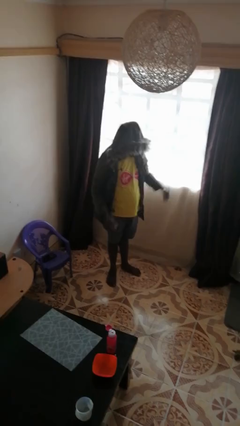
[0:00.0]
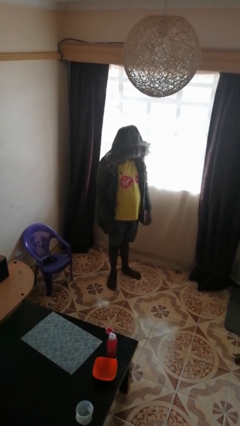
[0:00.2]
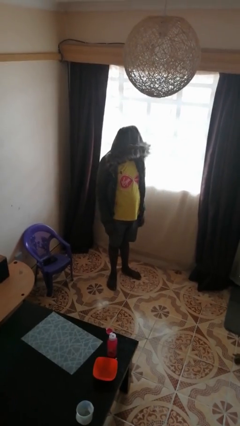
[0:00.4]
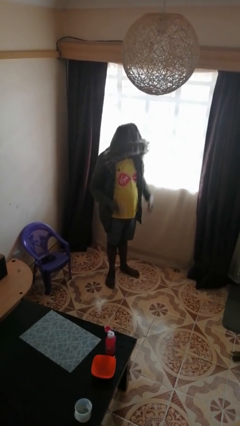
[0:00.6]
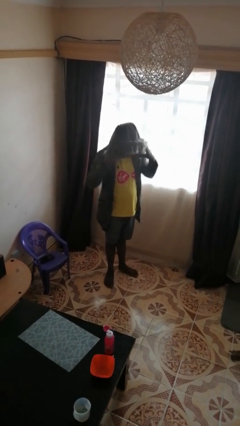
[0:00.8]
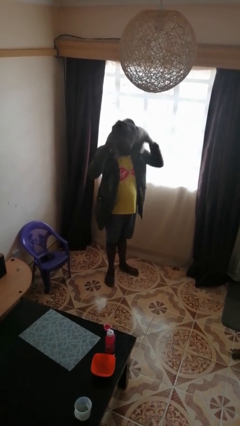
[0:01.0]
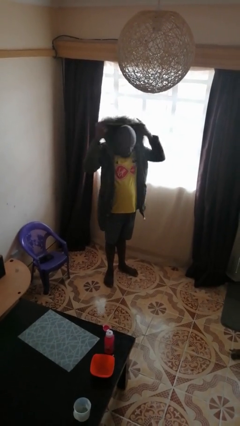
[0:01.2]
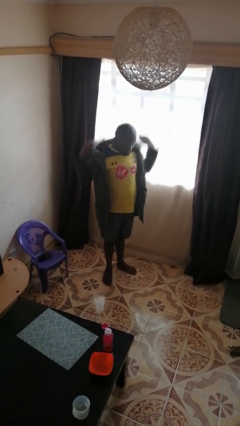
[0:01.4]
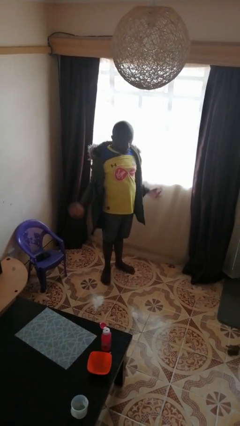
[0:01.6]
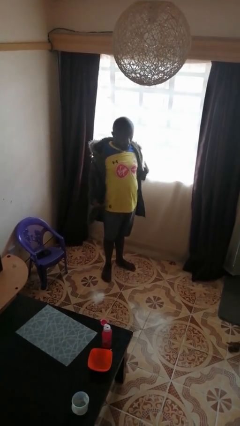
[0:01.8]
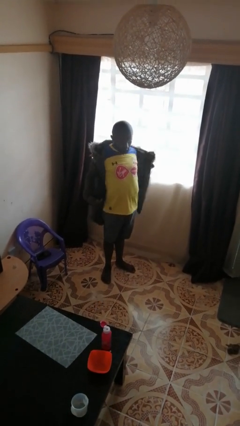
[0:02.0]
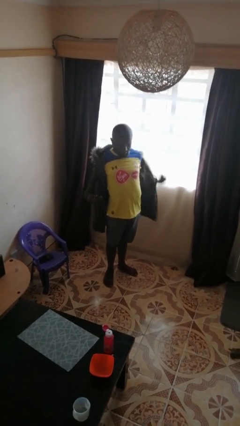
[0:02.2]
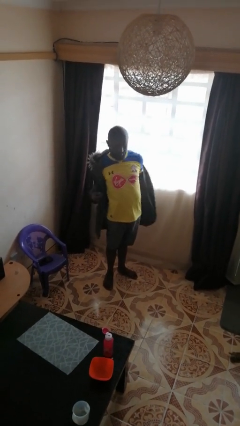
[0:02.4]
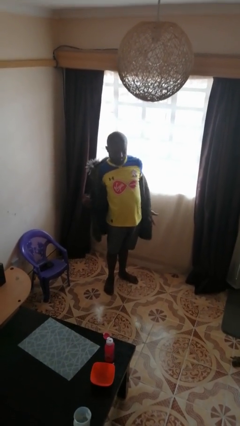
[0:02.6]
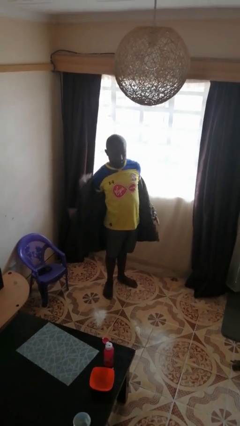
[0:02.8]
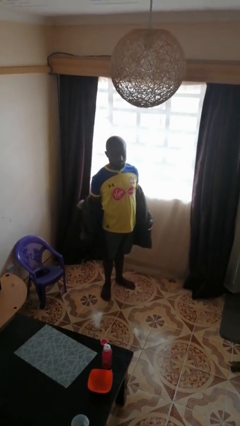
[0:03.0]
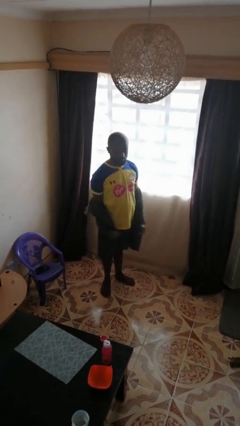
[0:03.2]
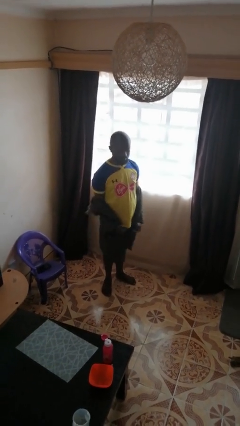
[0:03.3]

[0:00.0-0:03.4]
person takes off hoodie

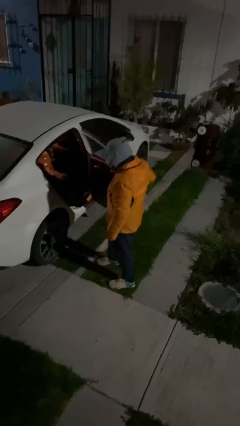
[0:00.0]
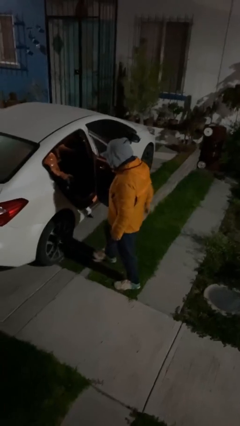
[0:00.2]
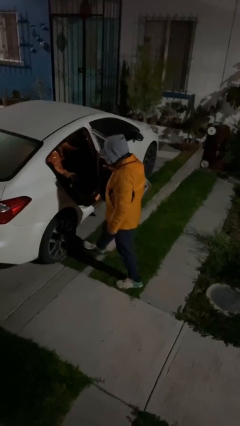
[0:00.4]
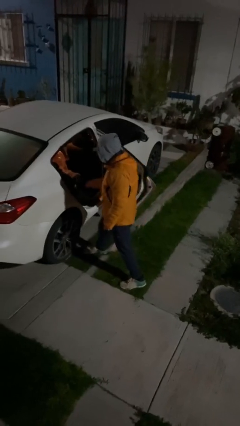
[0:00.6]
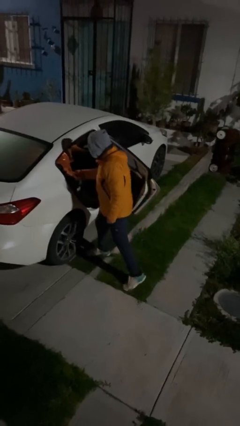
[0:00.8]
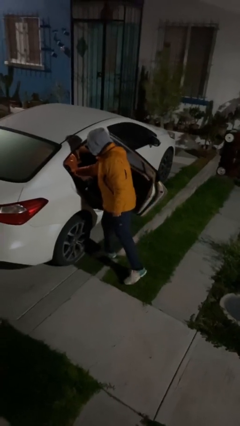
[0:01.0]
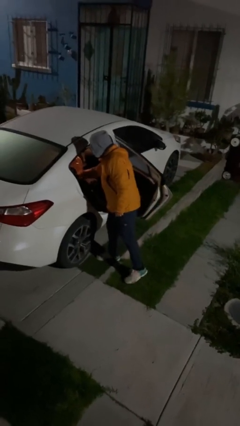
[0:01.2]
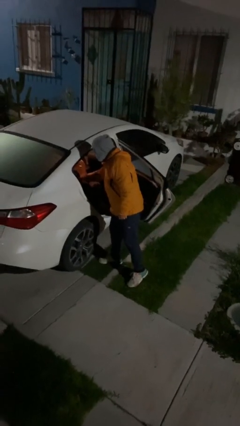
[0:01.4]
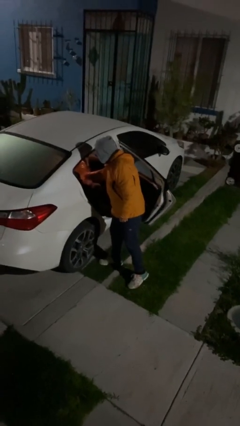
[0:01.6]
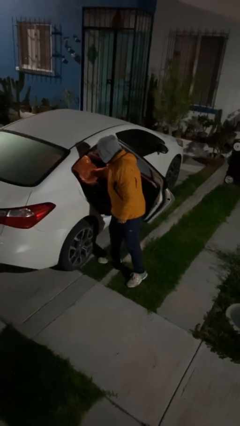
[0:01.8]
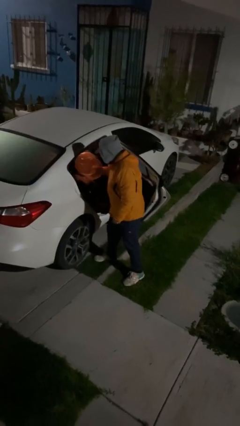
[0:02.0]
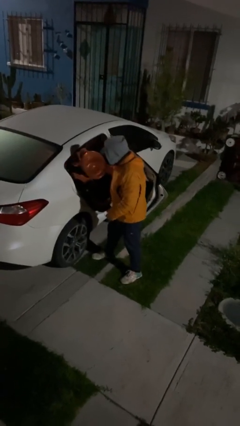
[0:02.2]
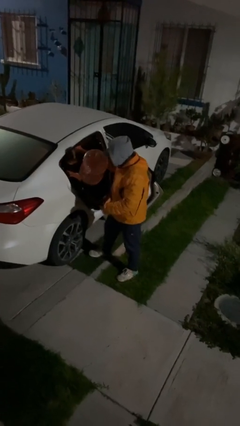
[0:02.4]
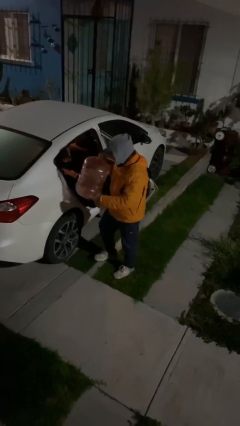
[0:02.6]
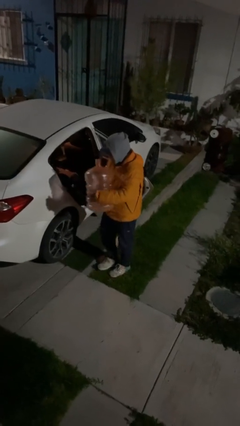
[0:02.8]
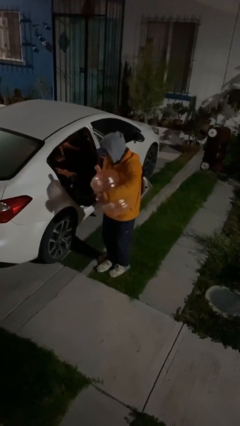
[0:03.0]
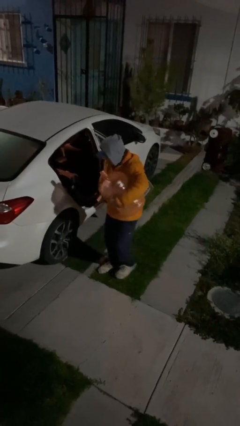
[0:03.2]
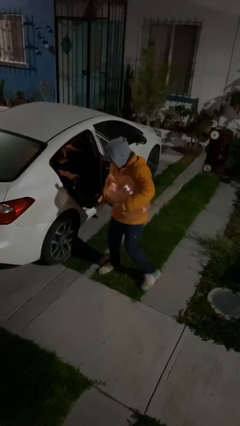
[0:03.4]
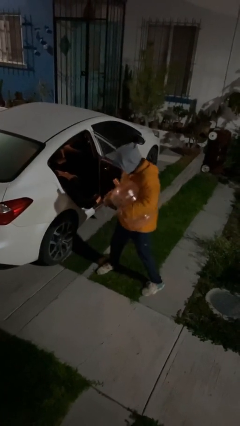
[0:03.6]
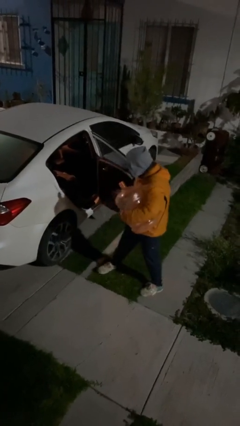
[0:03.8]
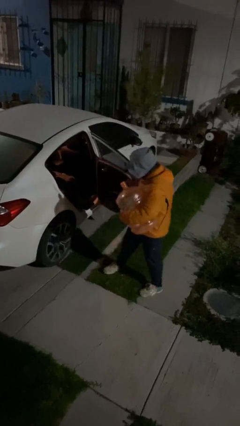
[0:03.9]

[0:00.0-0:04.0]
person unloads car

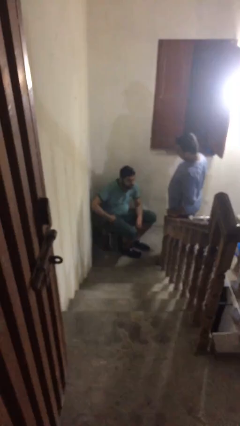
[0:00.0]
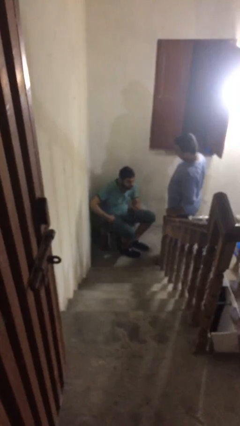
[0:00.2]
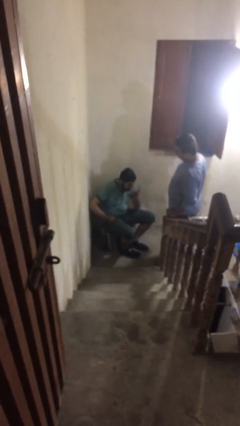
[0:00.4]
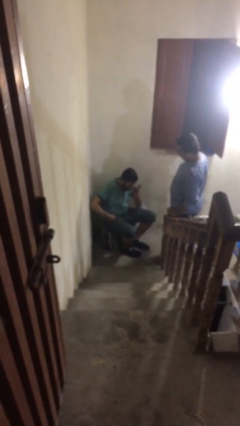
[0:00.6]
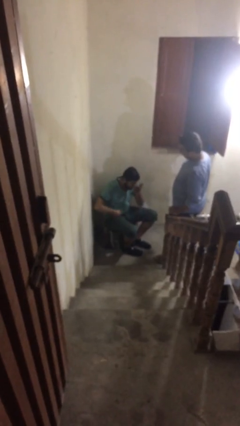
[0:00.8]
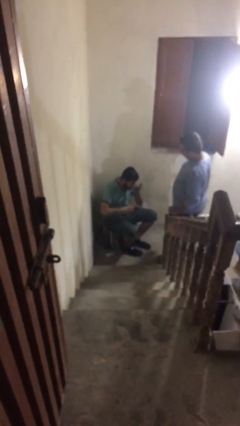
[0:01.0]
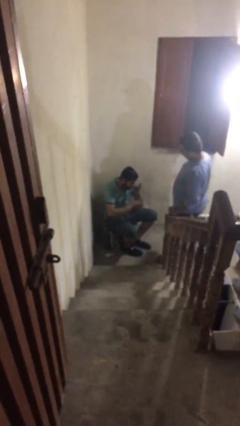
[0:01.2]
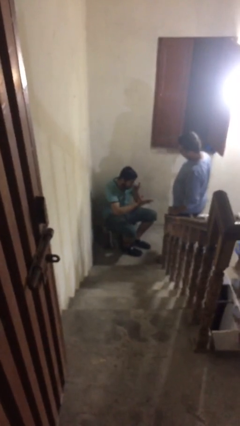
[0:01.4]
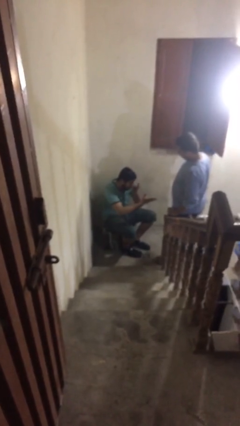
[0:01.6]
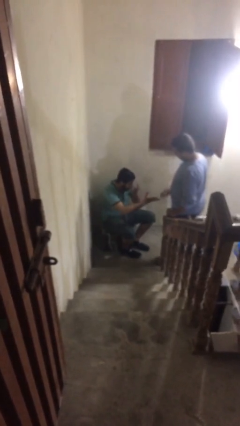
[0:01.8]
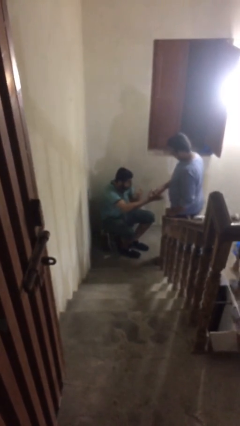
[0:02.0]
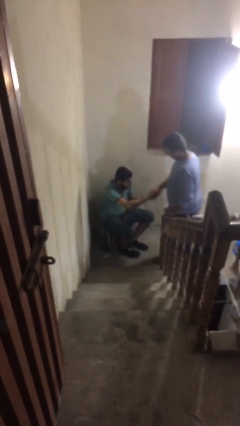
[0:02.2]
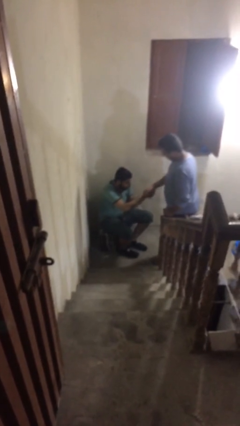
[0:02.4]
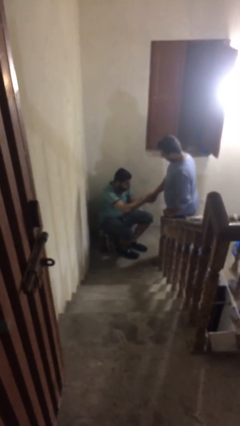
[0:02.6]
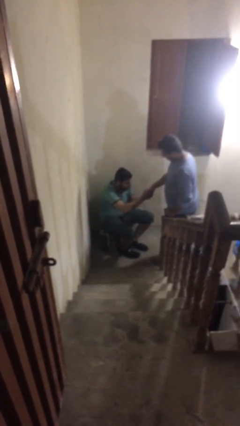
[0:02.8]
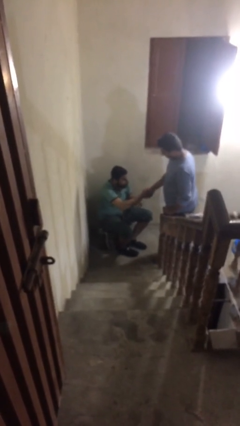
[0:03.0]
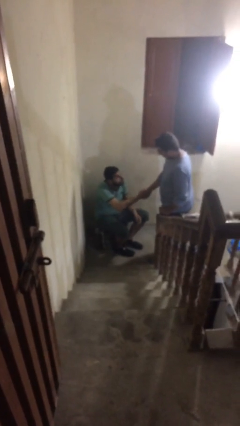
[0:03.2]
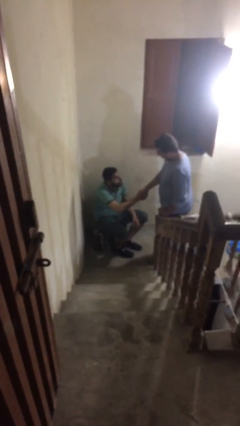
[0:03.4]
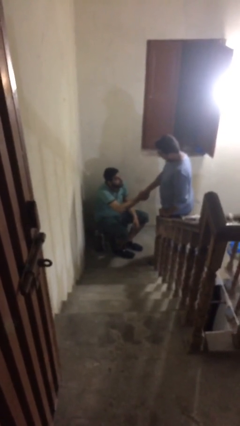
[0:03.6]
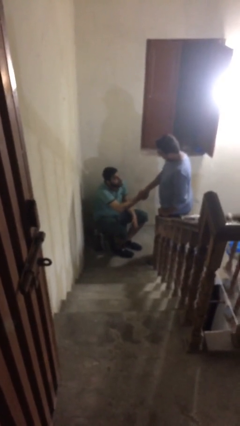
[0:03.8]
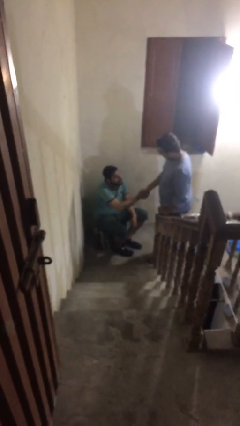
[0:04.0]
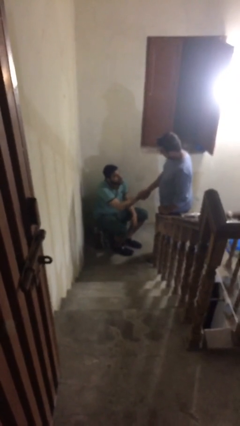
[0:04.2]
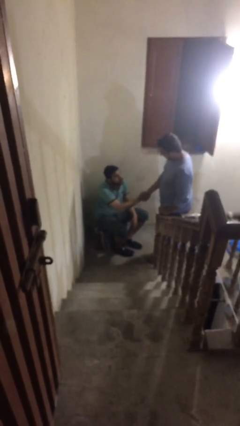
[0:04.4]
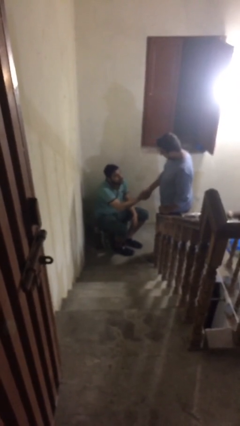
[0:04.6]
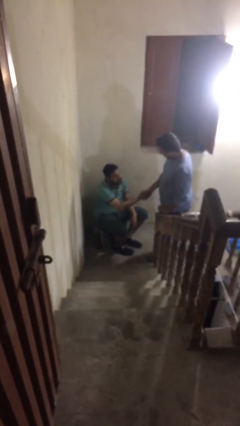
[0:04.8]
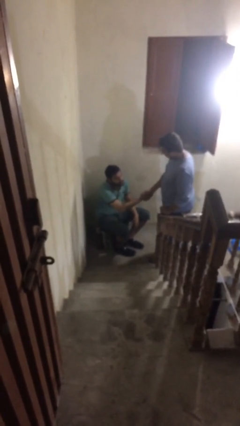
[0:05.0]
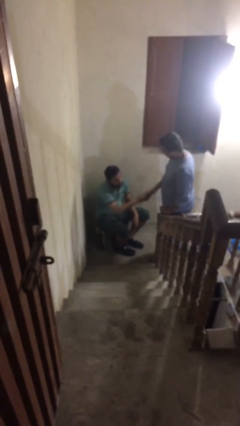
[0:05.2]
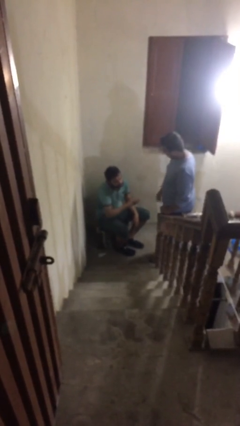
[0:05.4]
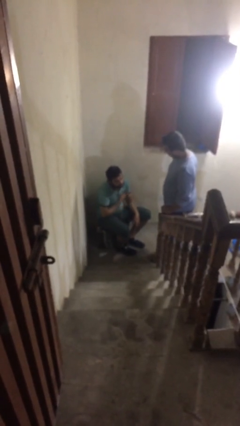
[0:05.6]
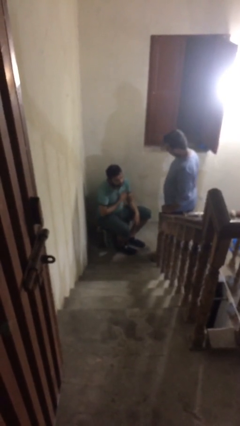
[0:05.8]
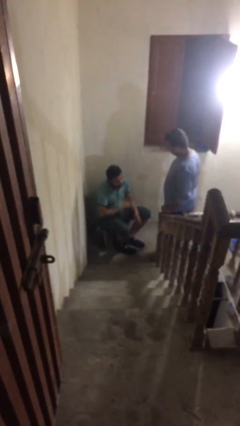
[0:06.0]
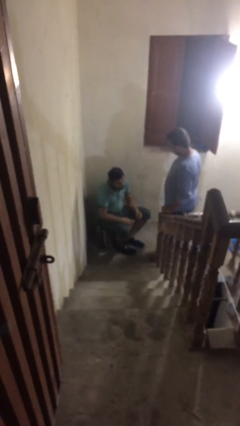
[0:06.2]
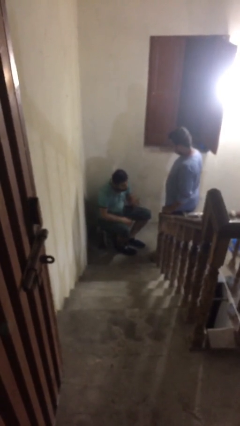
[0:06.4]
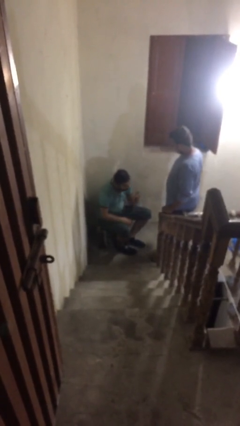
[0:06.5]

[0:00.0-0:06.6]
person shakes hand

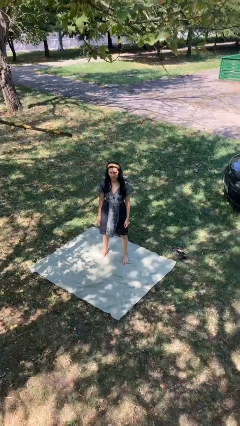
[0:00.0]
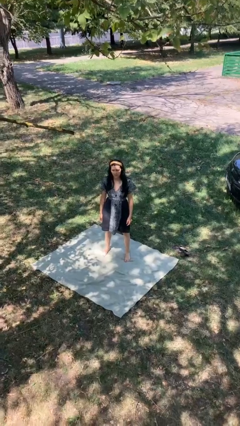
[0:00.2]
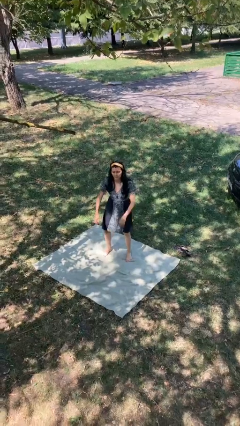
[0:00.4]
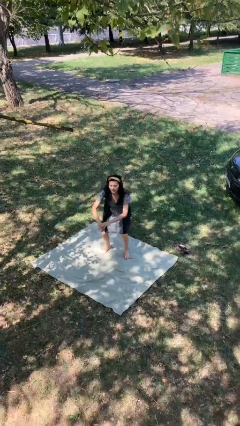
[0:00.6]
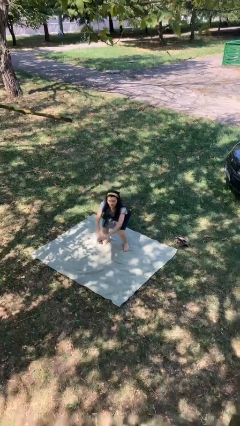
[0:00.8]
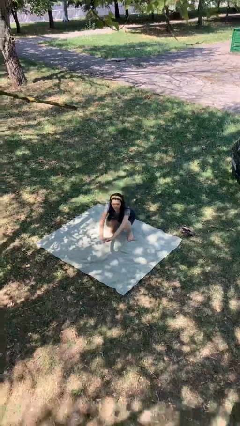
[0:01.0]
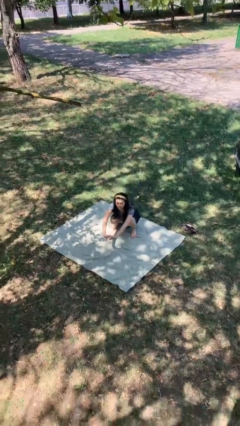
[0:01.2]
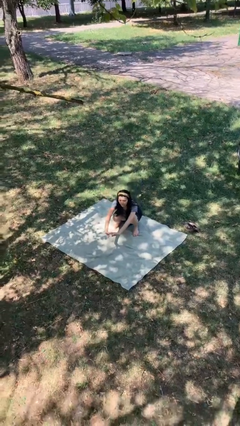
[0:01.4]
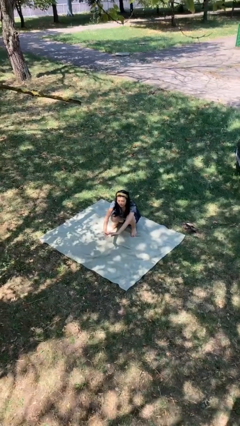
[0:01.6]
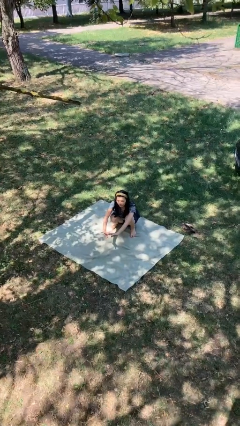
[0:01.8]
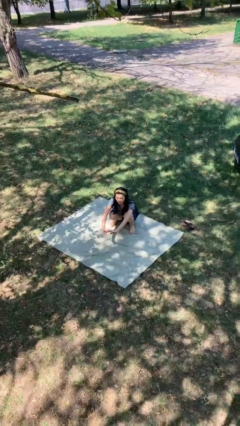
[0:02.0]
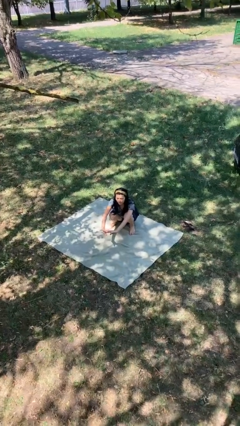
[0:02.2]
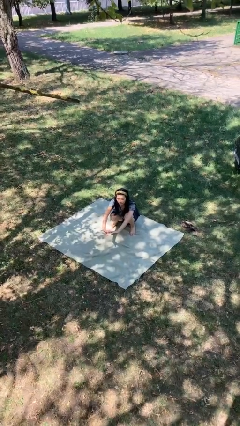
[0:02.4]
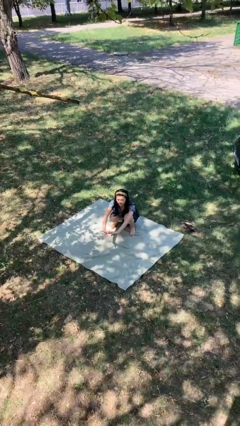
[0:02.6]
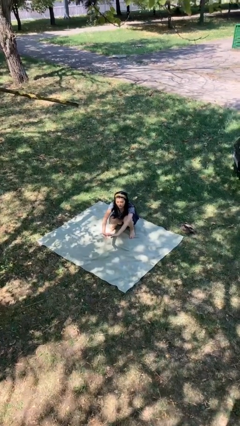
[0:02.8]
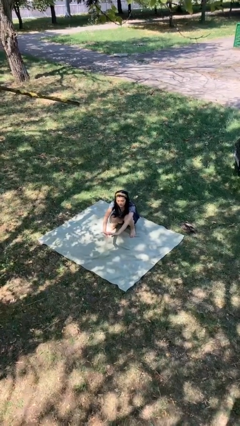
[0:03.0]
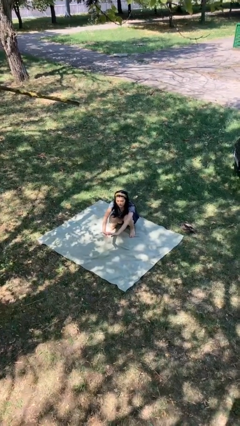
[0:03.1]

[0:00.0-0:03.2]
person squats

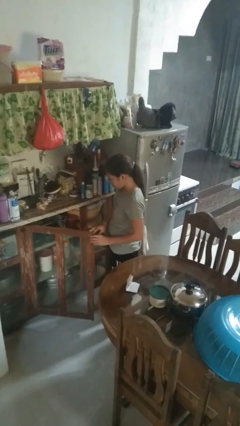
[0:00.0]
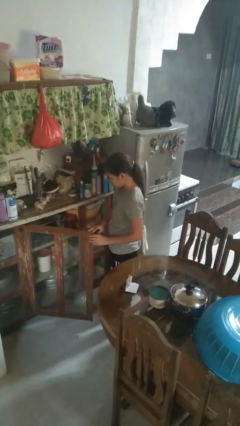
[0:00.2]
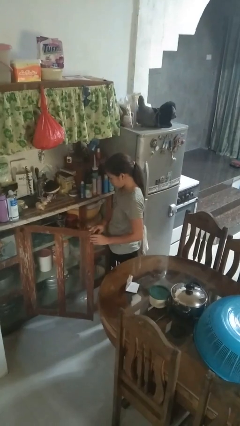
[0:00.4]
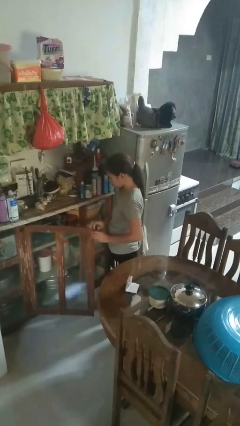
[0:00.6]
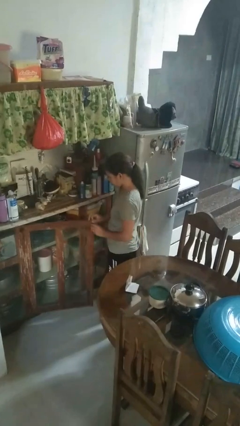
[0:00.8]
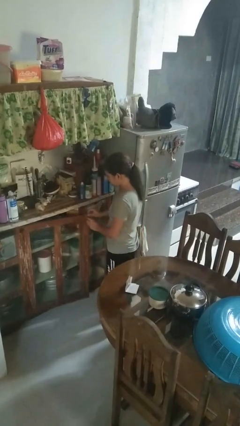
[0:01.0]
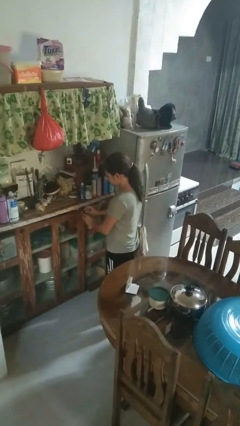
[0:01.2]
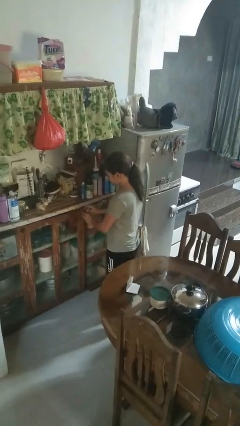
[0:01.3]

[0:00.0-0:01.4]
person closes cabinet
